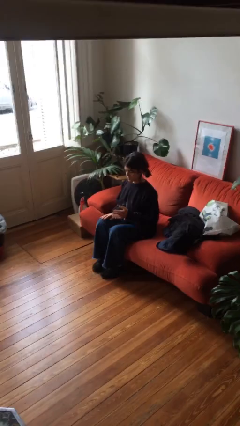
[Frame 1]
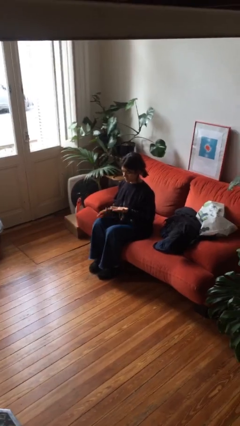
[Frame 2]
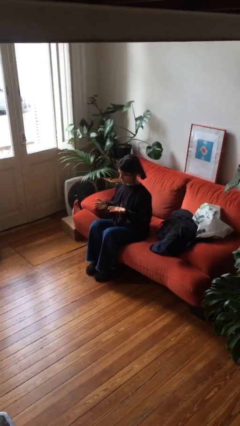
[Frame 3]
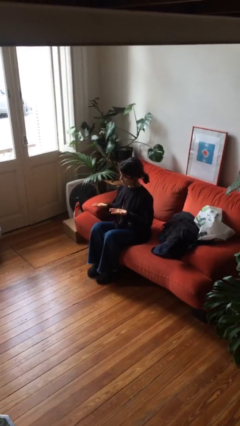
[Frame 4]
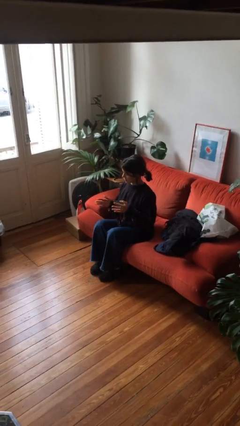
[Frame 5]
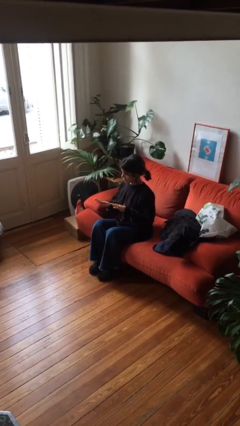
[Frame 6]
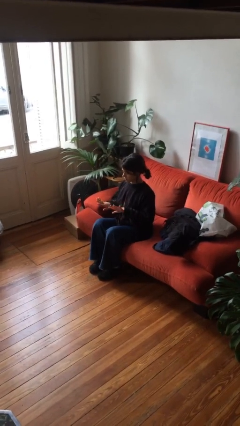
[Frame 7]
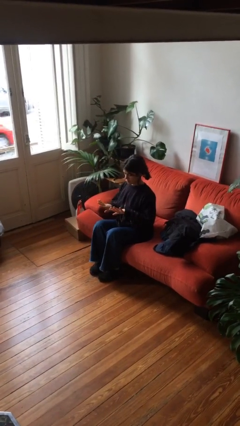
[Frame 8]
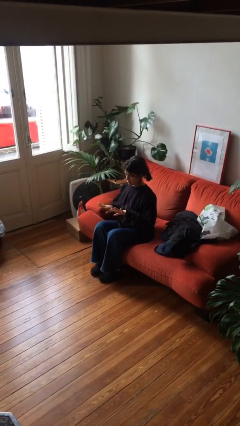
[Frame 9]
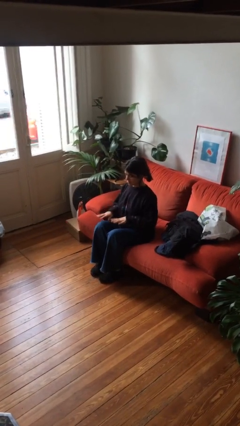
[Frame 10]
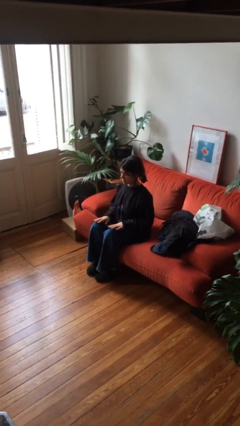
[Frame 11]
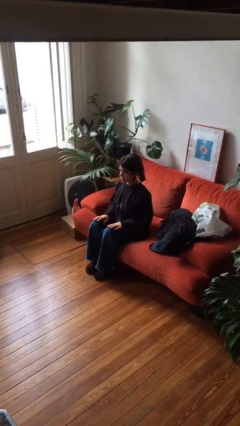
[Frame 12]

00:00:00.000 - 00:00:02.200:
person looks at hands in lap

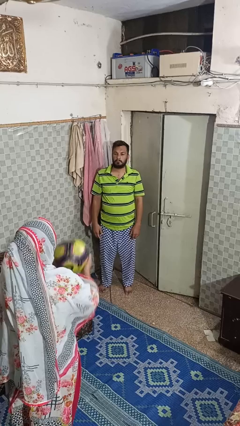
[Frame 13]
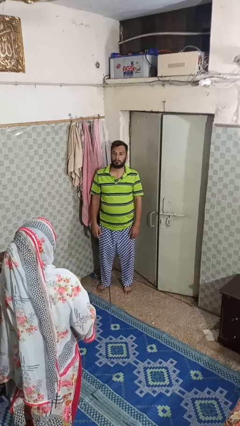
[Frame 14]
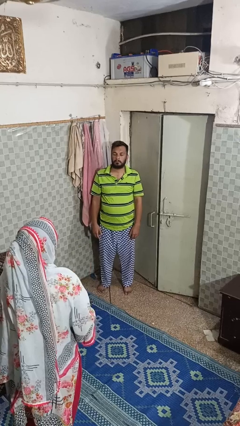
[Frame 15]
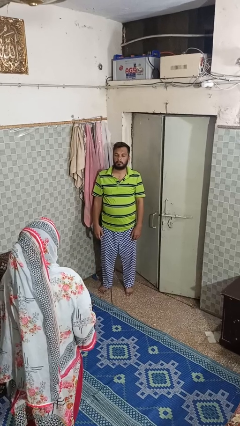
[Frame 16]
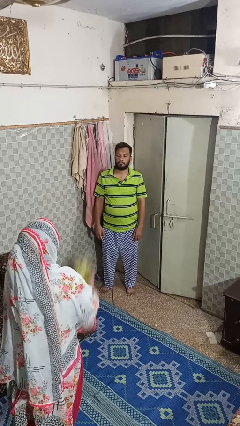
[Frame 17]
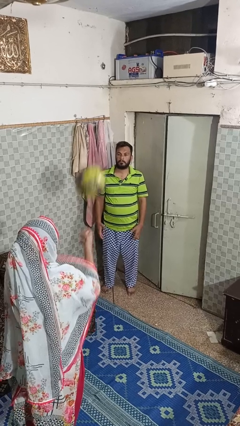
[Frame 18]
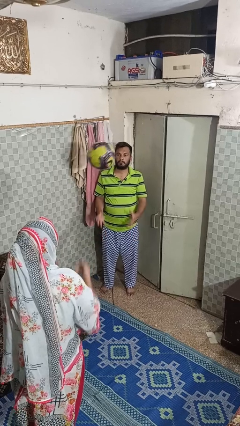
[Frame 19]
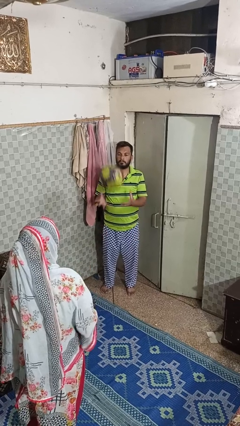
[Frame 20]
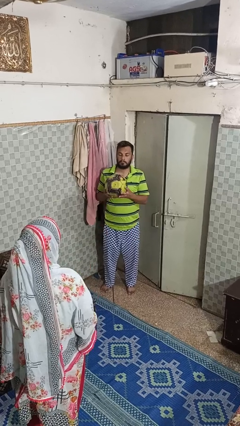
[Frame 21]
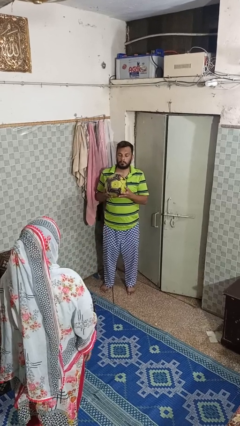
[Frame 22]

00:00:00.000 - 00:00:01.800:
person catches object from person

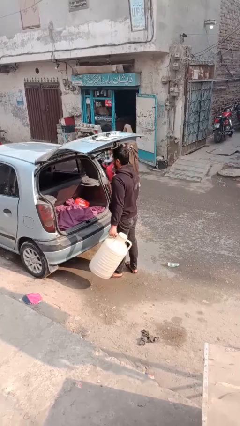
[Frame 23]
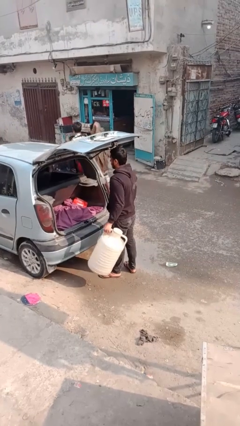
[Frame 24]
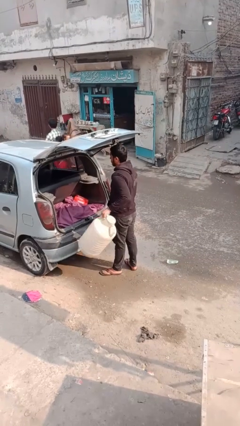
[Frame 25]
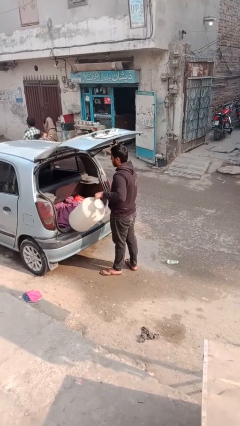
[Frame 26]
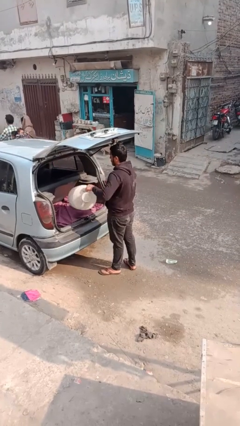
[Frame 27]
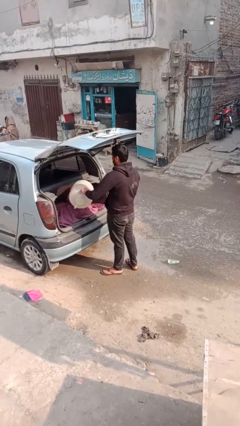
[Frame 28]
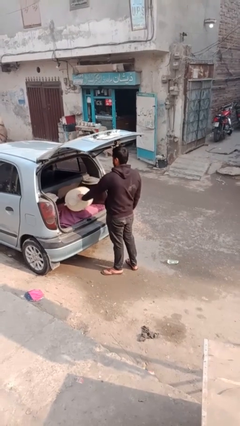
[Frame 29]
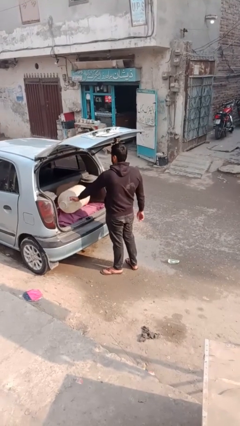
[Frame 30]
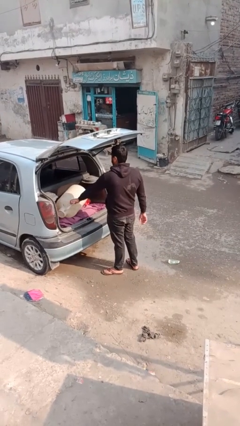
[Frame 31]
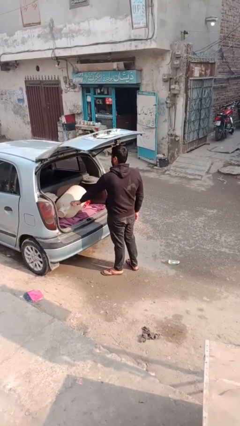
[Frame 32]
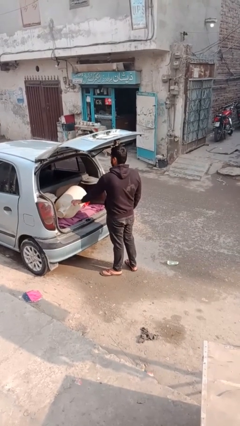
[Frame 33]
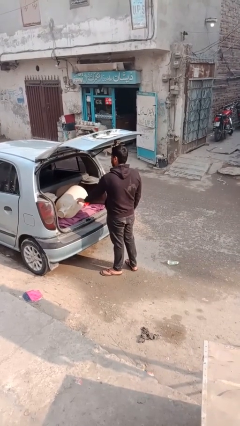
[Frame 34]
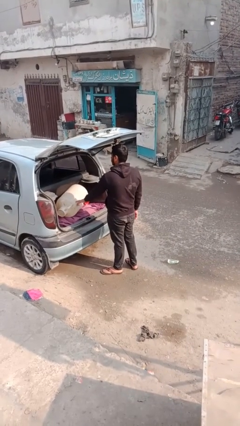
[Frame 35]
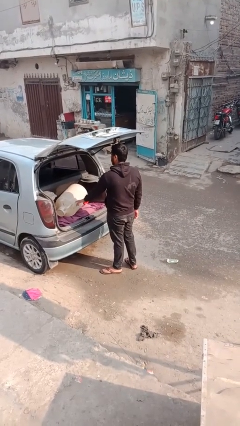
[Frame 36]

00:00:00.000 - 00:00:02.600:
person loads car

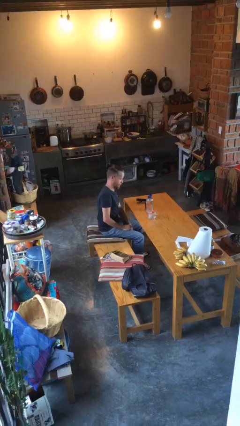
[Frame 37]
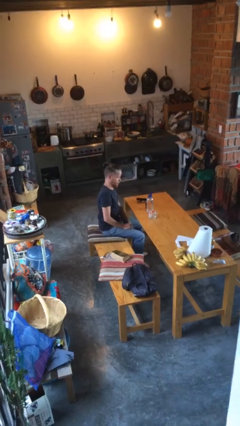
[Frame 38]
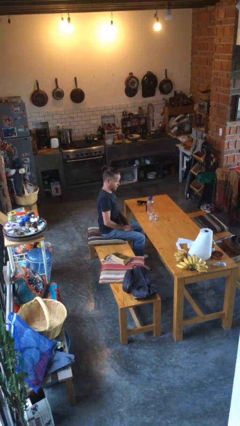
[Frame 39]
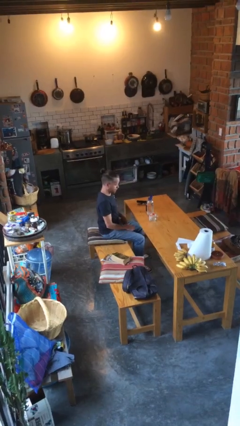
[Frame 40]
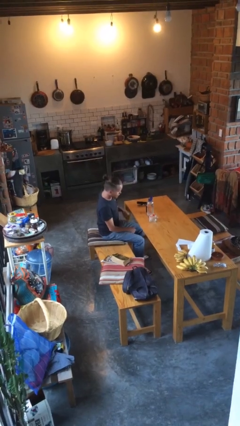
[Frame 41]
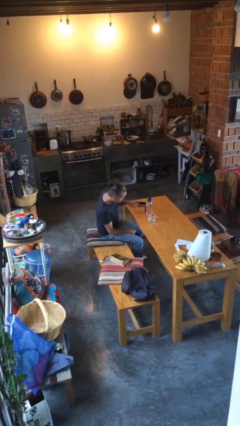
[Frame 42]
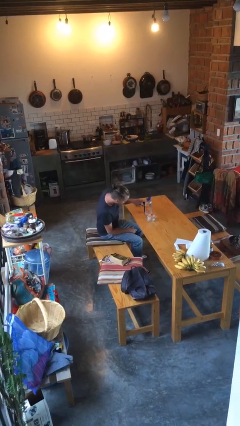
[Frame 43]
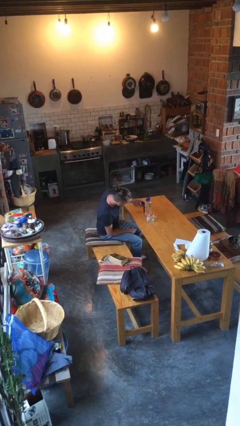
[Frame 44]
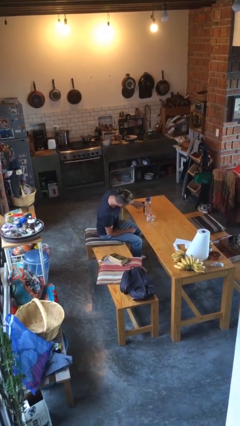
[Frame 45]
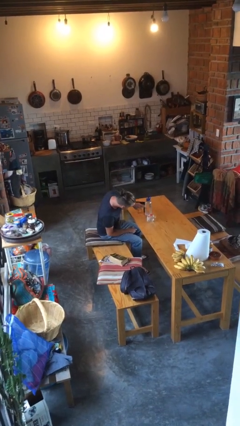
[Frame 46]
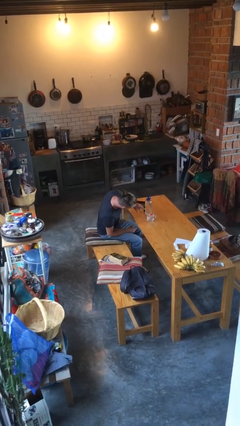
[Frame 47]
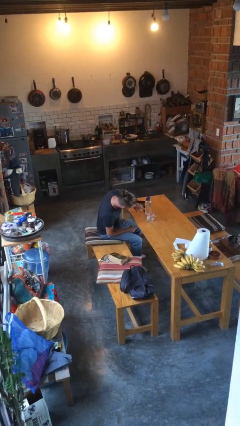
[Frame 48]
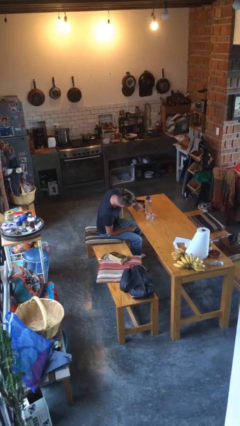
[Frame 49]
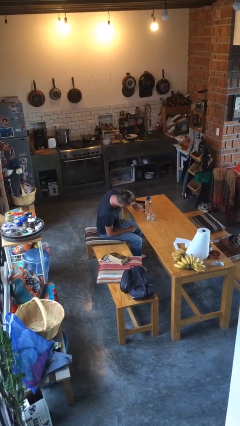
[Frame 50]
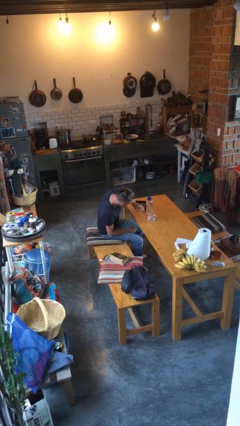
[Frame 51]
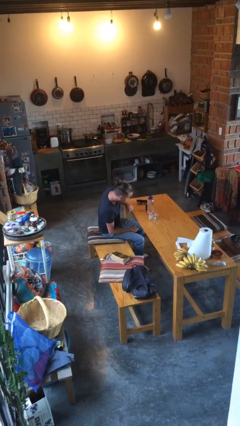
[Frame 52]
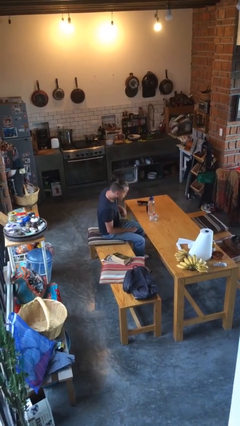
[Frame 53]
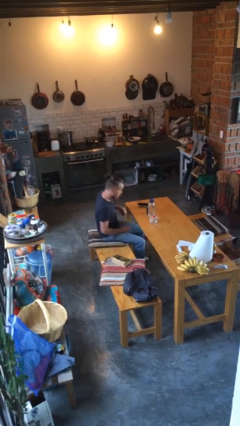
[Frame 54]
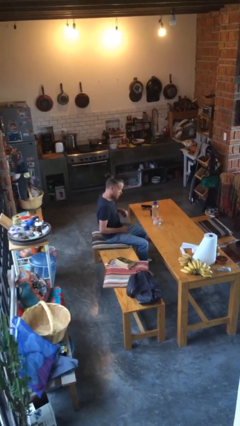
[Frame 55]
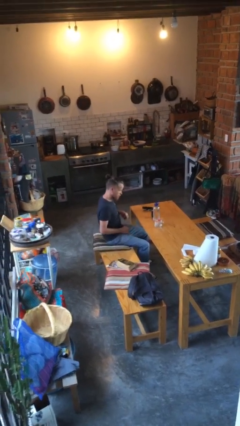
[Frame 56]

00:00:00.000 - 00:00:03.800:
person taps object with finger

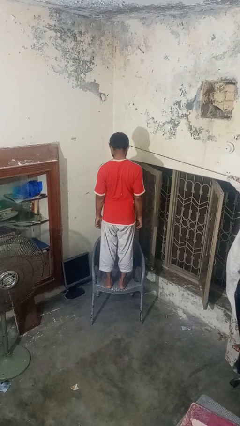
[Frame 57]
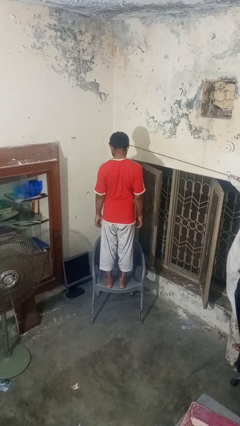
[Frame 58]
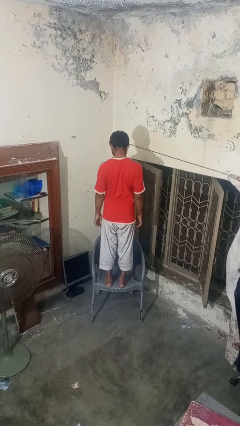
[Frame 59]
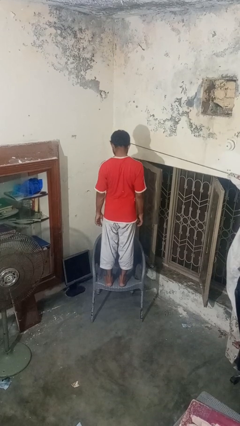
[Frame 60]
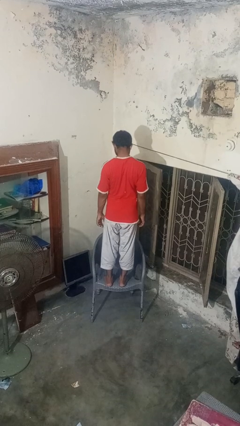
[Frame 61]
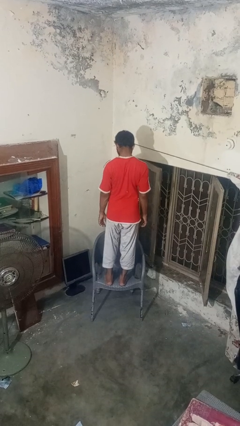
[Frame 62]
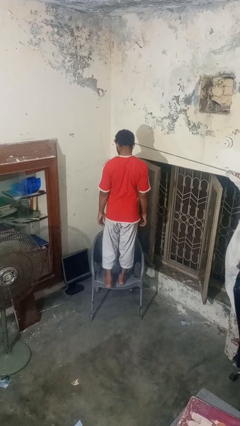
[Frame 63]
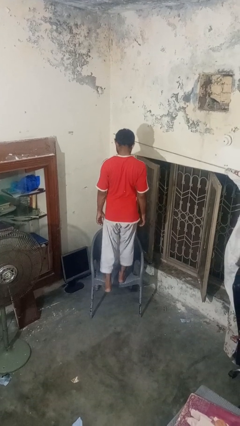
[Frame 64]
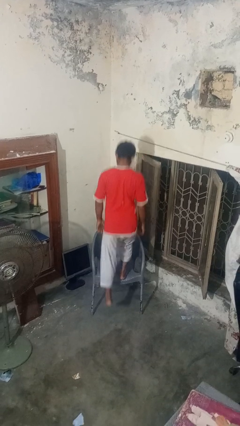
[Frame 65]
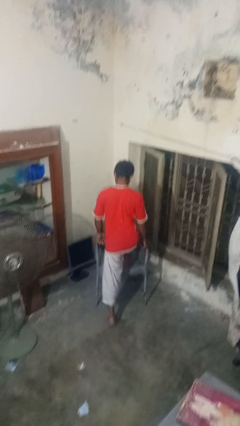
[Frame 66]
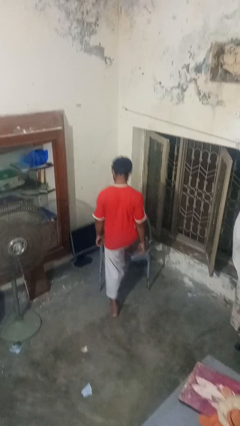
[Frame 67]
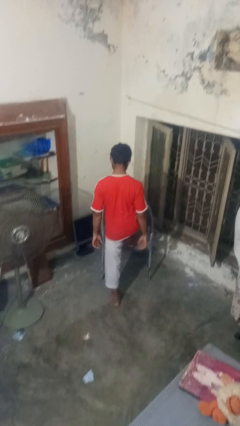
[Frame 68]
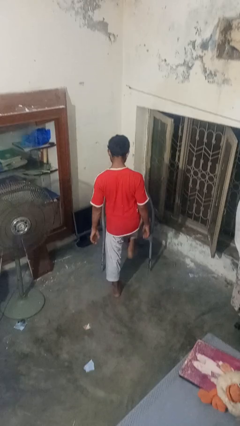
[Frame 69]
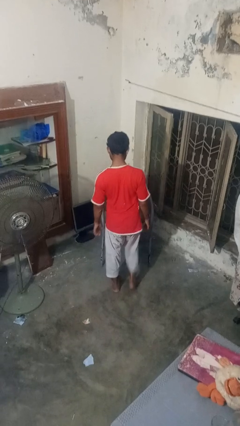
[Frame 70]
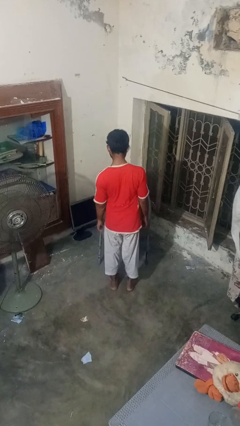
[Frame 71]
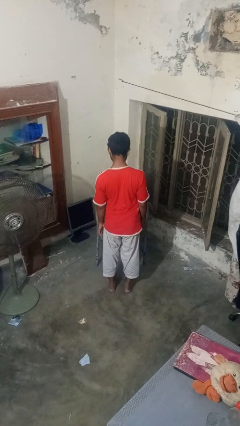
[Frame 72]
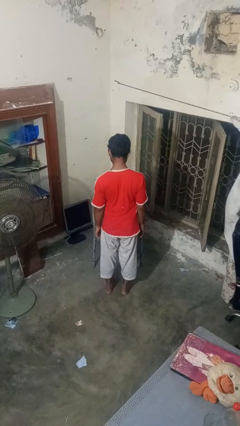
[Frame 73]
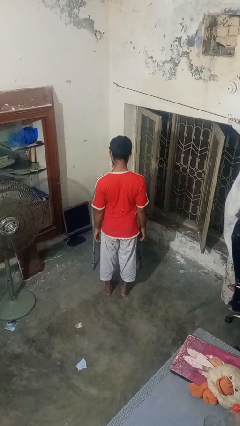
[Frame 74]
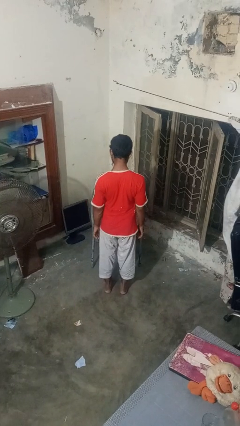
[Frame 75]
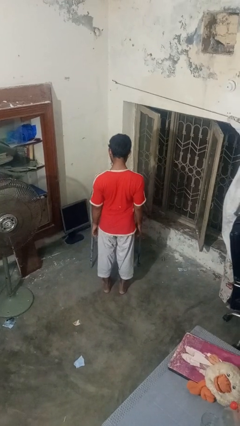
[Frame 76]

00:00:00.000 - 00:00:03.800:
person climbs off chair

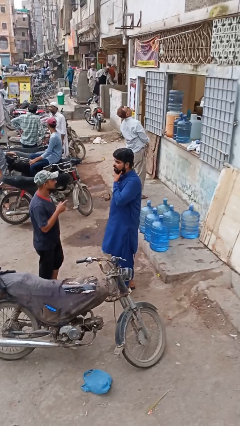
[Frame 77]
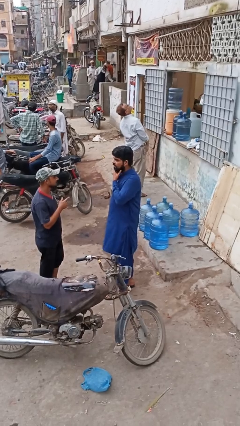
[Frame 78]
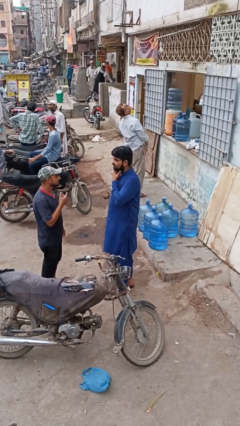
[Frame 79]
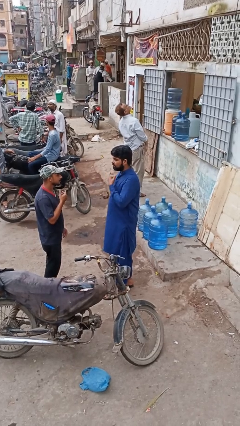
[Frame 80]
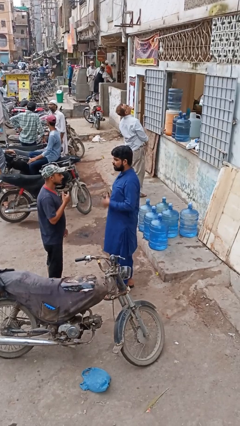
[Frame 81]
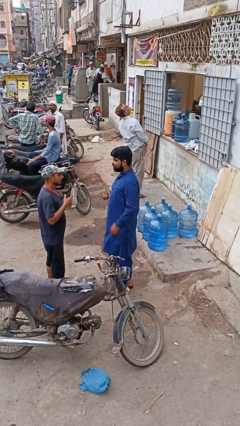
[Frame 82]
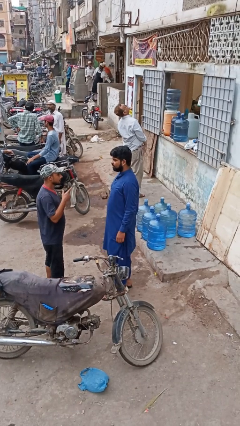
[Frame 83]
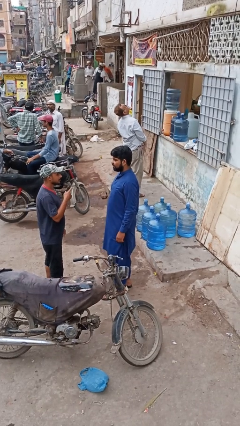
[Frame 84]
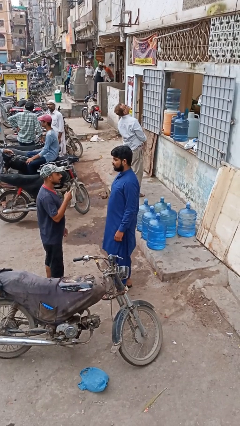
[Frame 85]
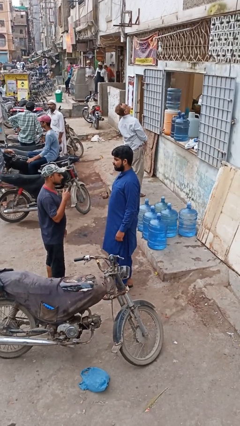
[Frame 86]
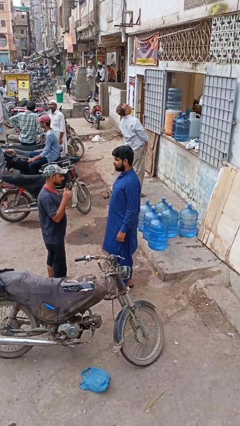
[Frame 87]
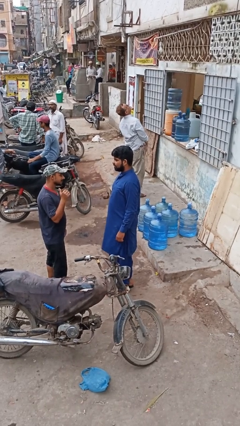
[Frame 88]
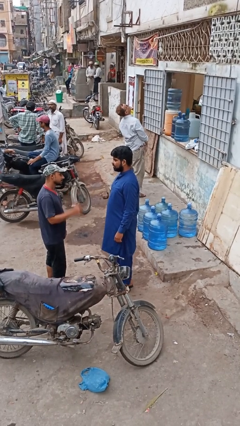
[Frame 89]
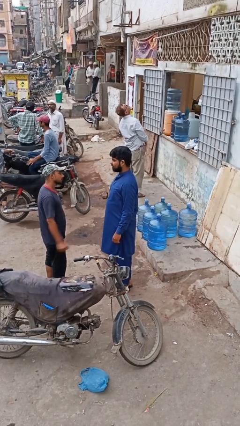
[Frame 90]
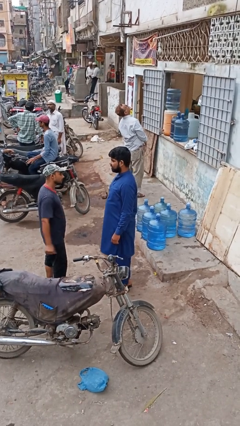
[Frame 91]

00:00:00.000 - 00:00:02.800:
person talks to person
